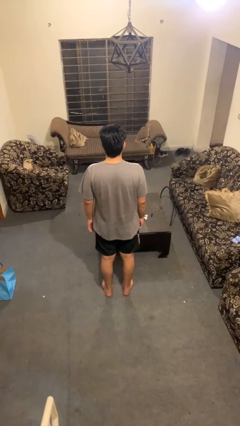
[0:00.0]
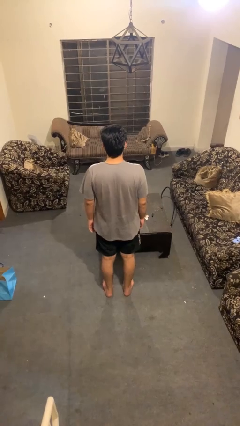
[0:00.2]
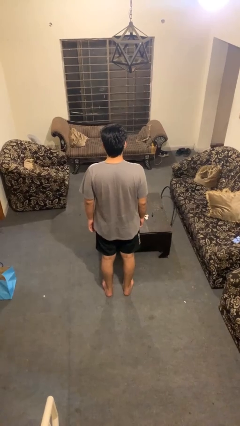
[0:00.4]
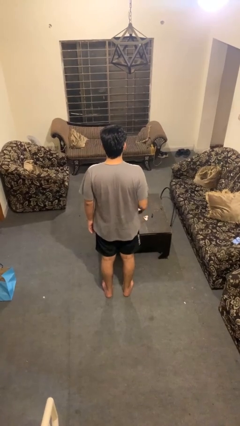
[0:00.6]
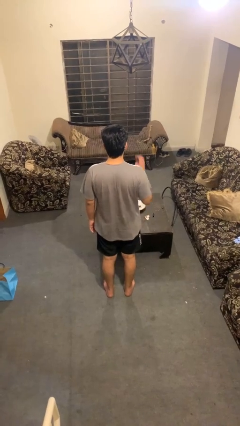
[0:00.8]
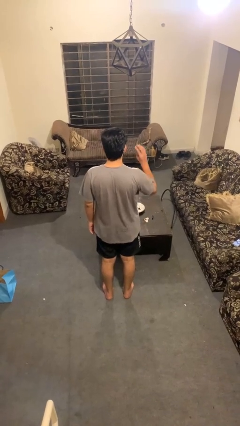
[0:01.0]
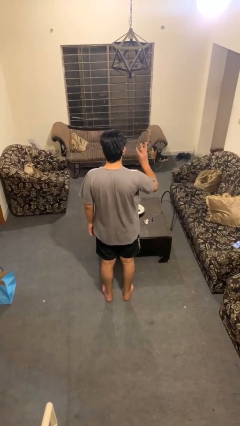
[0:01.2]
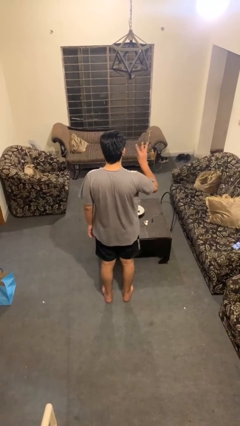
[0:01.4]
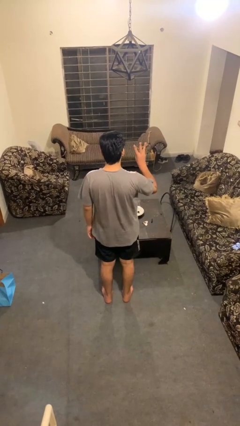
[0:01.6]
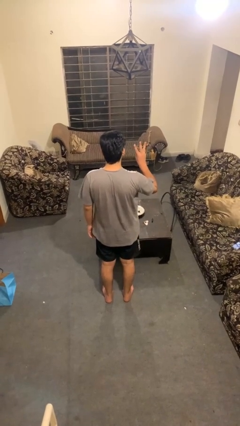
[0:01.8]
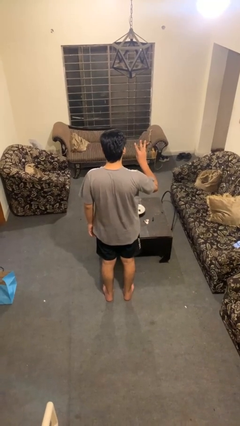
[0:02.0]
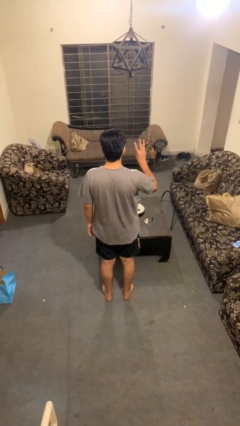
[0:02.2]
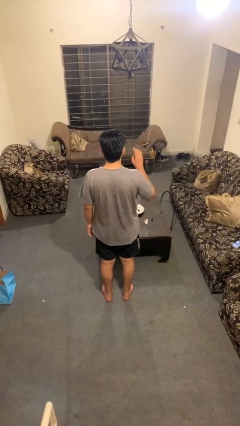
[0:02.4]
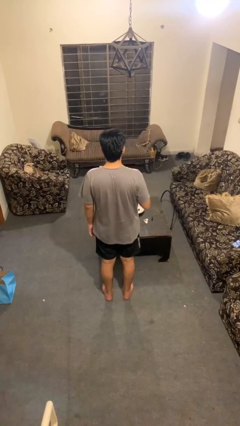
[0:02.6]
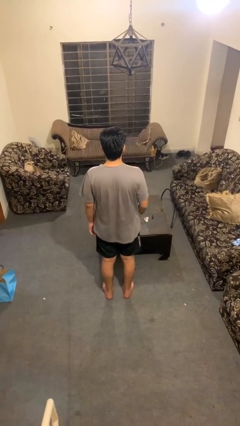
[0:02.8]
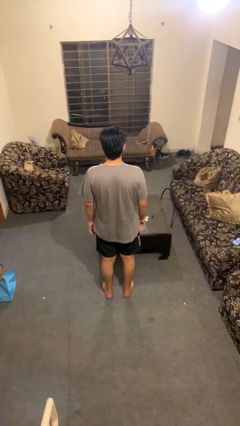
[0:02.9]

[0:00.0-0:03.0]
person gestures number three

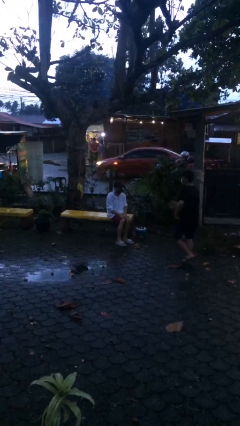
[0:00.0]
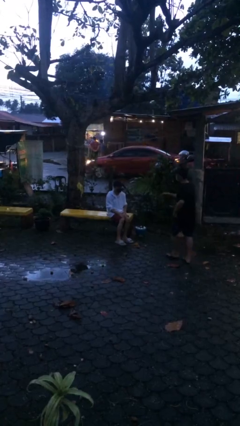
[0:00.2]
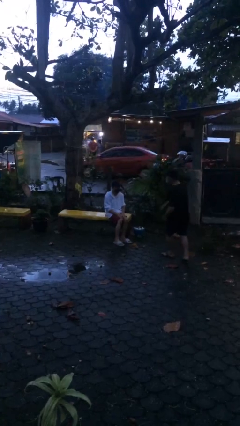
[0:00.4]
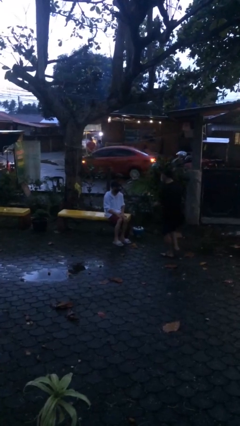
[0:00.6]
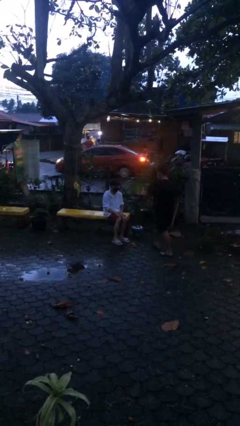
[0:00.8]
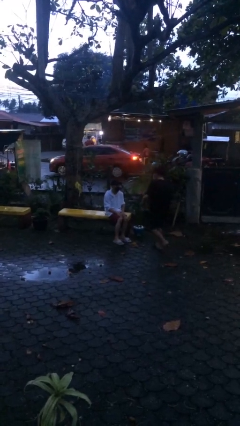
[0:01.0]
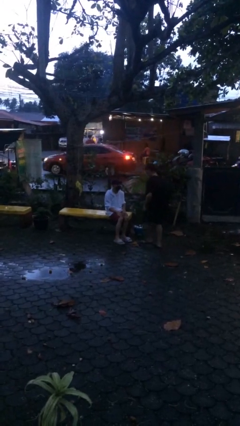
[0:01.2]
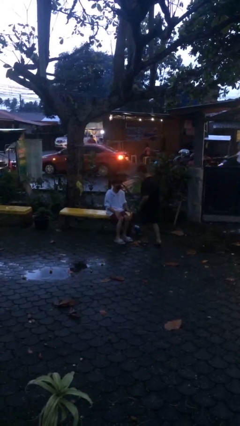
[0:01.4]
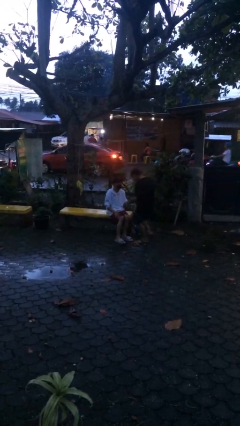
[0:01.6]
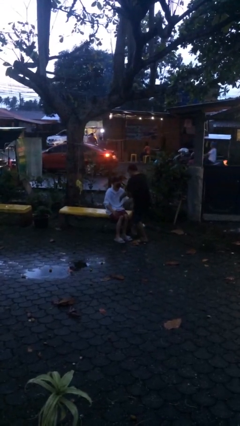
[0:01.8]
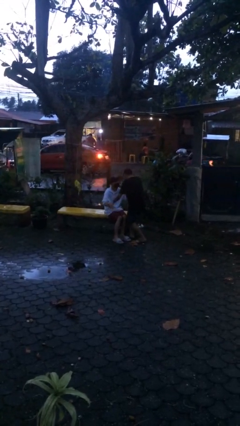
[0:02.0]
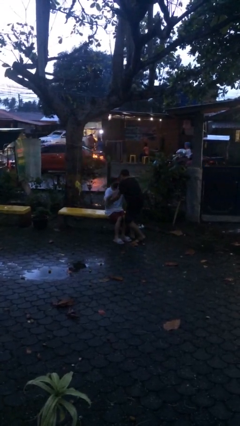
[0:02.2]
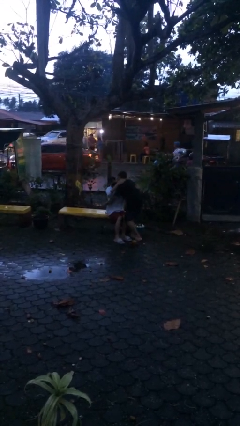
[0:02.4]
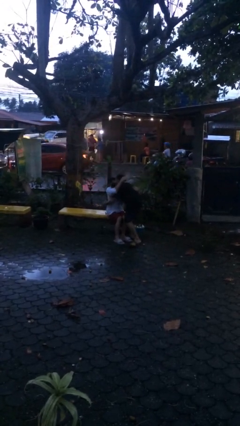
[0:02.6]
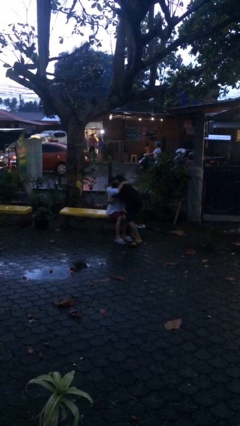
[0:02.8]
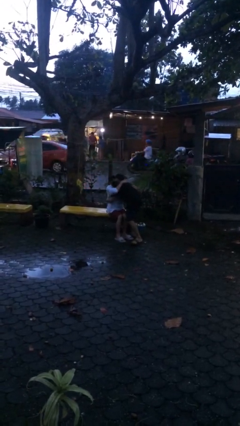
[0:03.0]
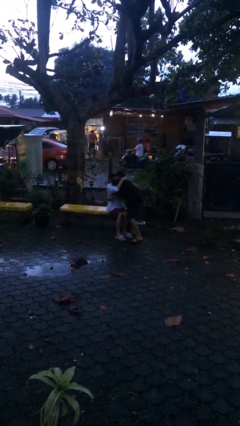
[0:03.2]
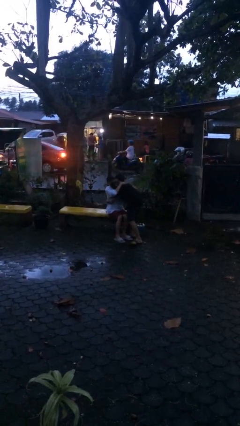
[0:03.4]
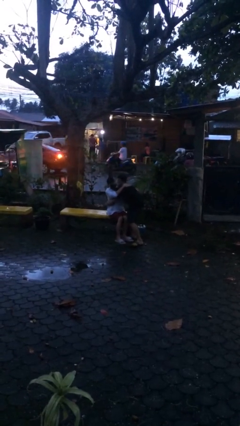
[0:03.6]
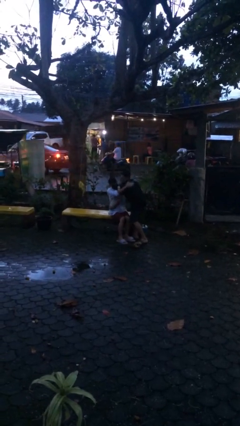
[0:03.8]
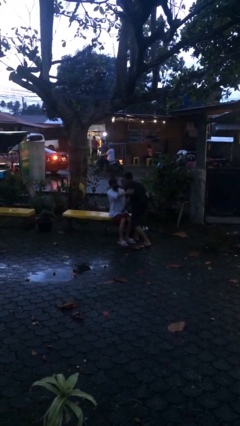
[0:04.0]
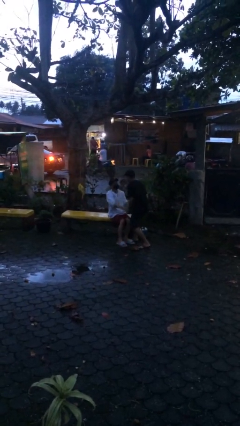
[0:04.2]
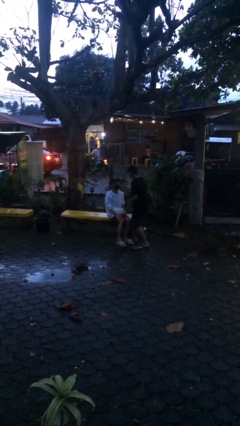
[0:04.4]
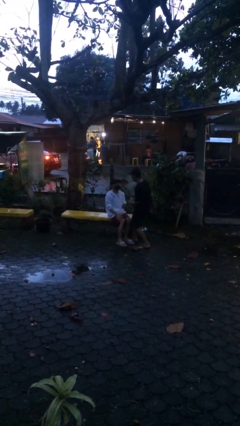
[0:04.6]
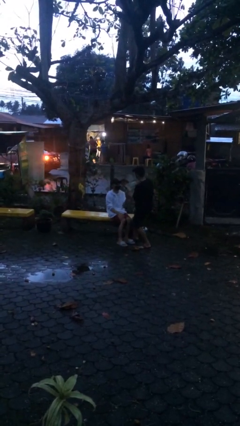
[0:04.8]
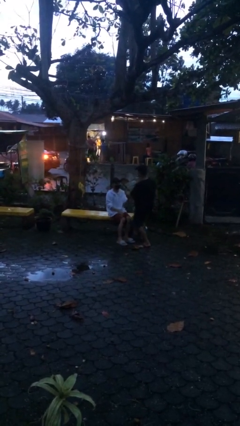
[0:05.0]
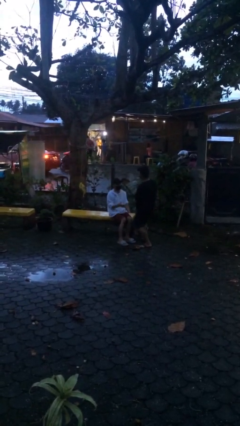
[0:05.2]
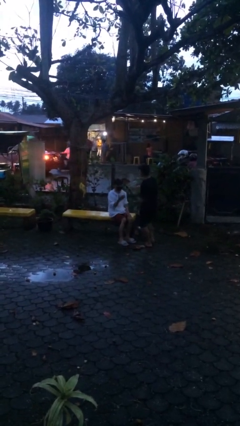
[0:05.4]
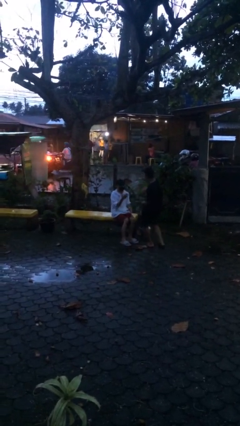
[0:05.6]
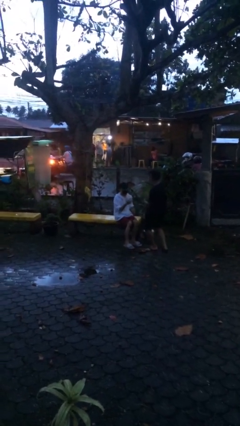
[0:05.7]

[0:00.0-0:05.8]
person embraces person

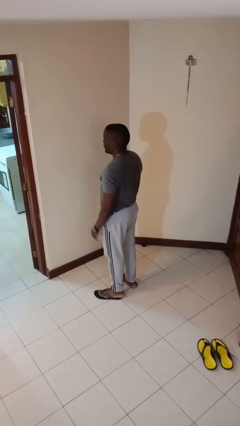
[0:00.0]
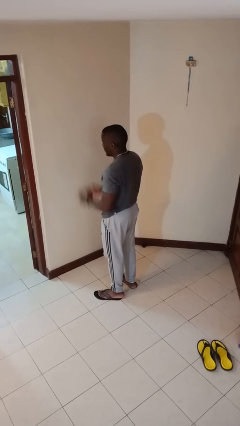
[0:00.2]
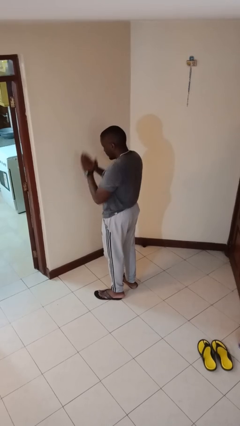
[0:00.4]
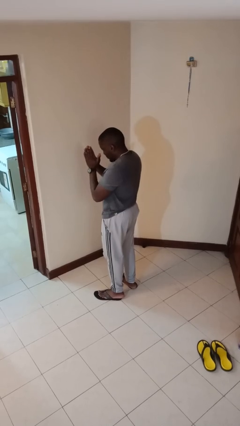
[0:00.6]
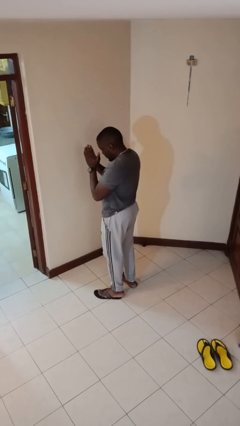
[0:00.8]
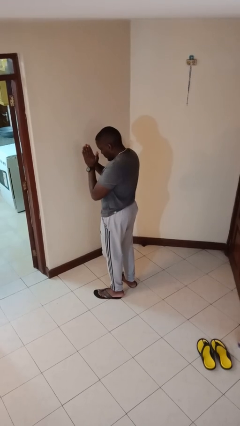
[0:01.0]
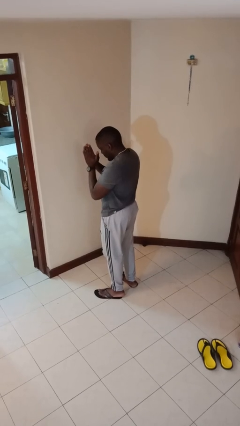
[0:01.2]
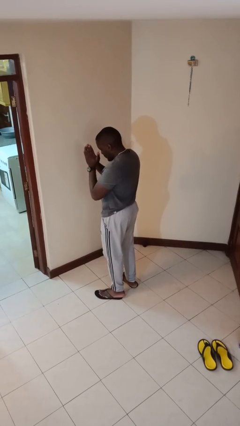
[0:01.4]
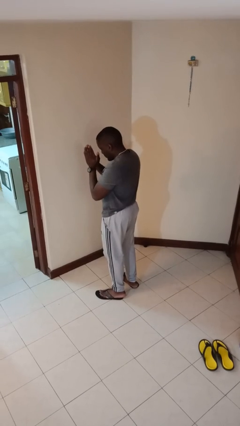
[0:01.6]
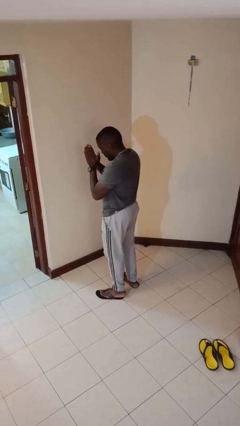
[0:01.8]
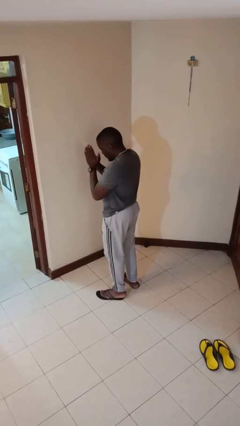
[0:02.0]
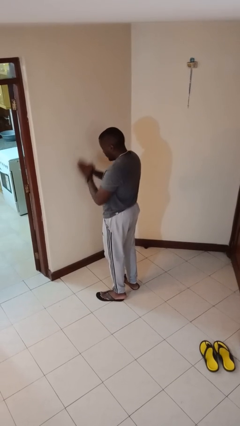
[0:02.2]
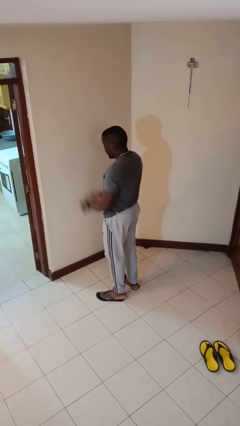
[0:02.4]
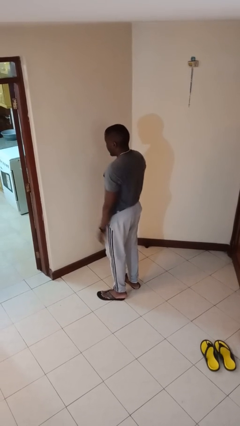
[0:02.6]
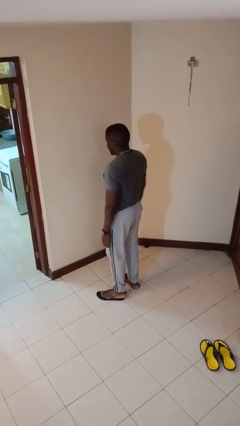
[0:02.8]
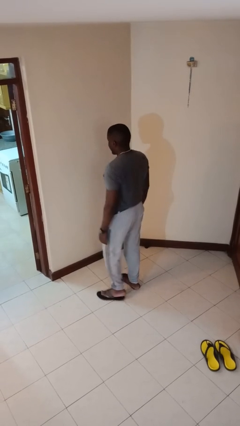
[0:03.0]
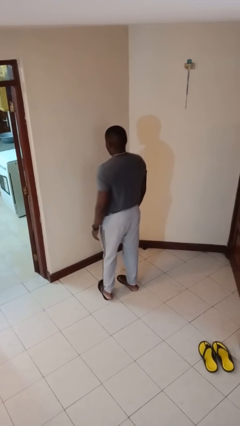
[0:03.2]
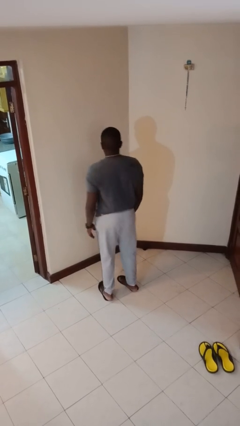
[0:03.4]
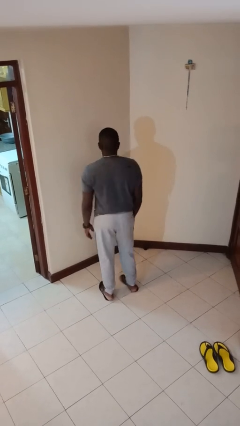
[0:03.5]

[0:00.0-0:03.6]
person prays

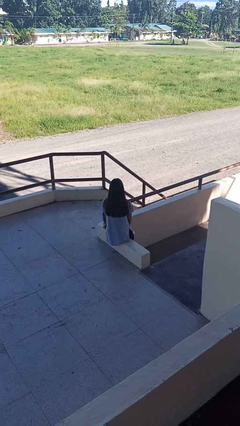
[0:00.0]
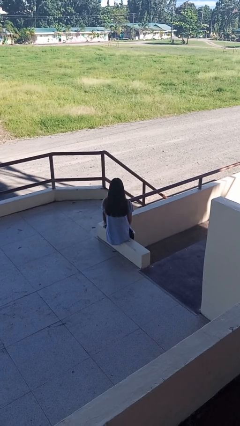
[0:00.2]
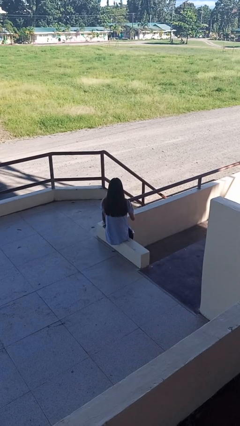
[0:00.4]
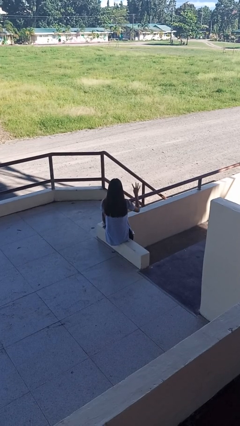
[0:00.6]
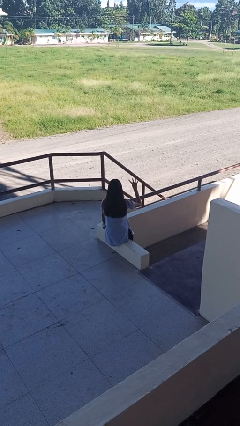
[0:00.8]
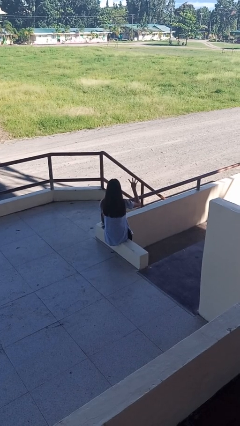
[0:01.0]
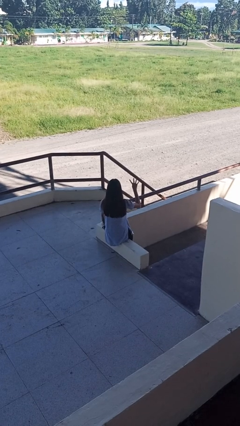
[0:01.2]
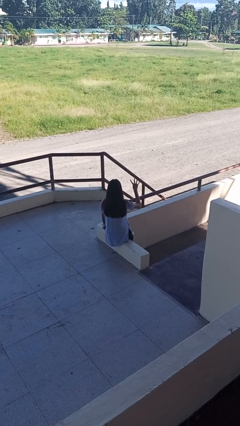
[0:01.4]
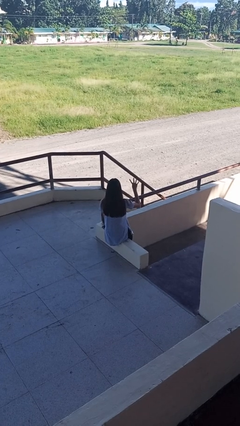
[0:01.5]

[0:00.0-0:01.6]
person gestures number four

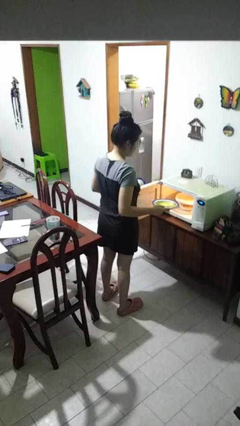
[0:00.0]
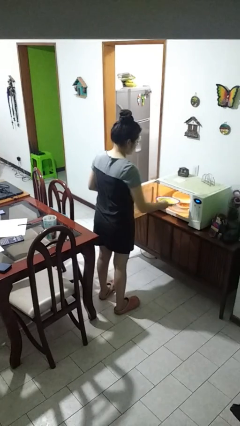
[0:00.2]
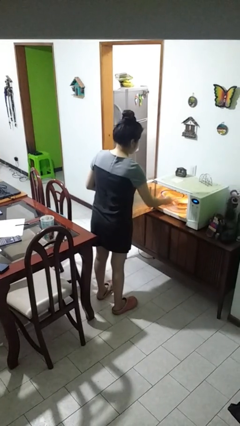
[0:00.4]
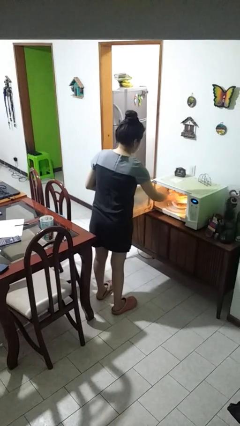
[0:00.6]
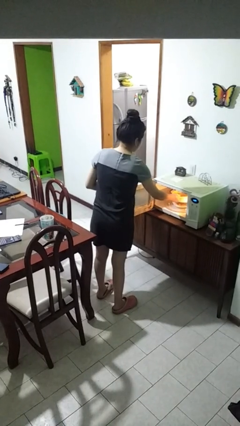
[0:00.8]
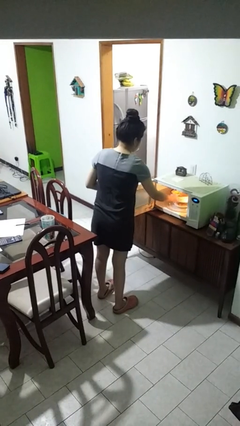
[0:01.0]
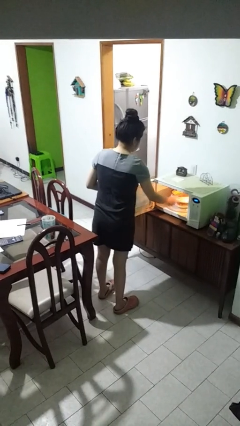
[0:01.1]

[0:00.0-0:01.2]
person puts object into microwave

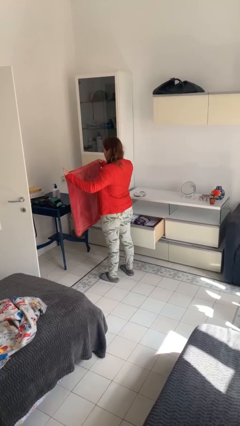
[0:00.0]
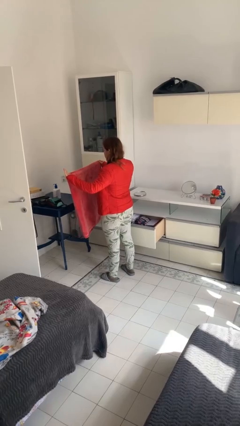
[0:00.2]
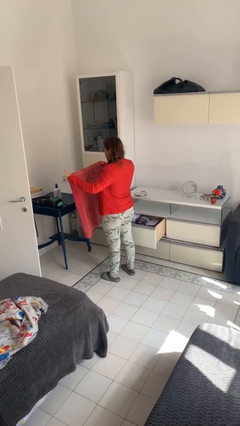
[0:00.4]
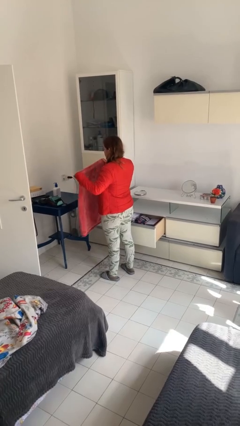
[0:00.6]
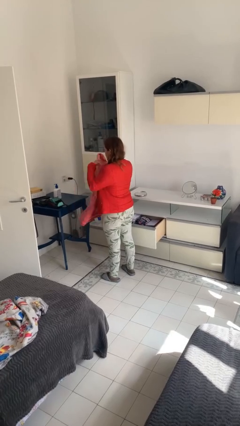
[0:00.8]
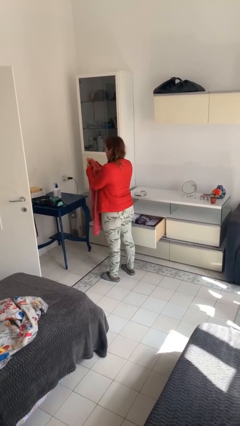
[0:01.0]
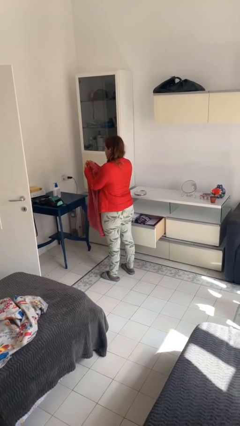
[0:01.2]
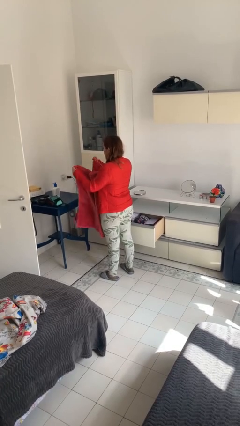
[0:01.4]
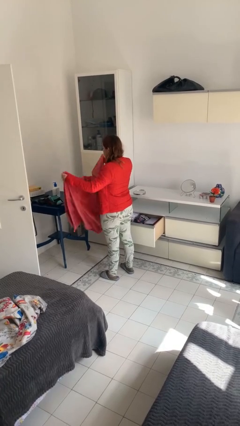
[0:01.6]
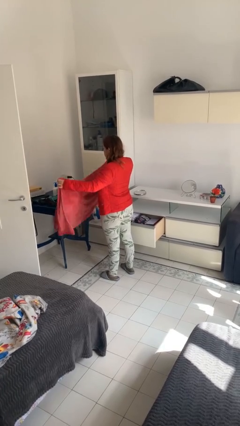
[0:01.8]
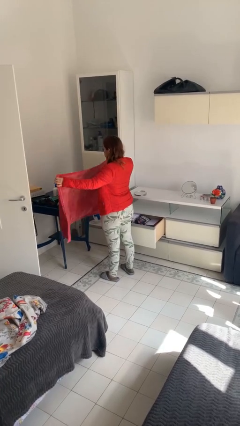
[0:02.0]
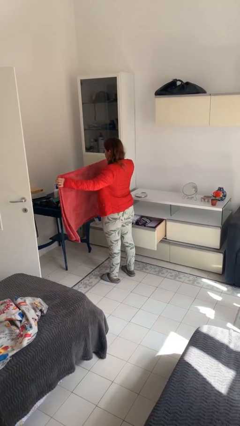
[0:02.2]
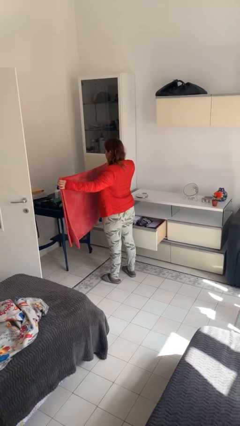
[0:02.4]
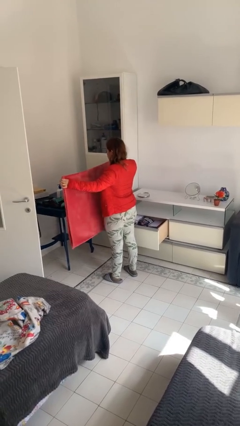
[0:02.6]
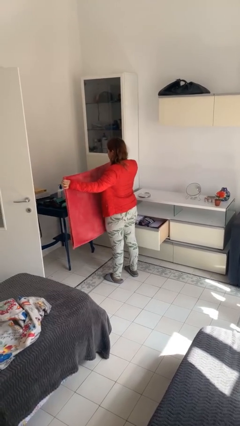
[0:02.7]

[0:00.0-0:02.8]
person unfolds blanket
